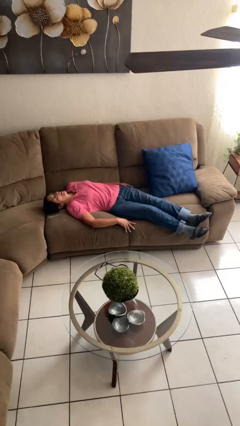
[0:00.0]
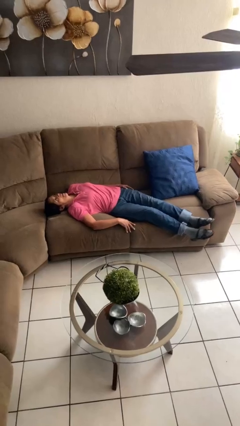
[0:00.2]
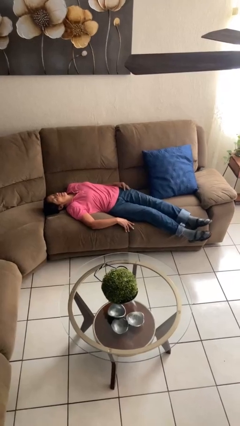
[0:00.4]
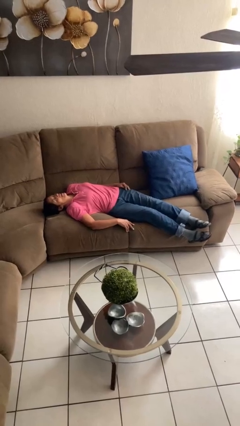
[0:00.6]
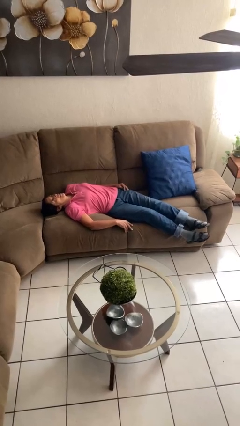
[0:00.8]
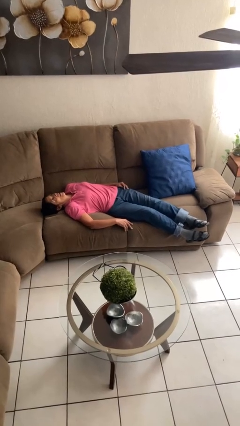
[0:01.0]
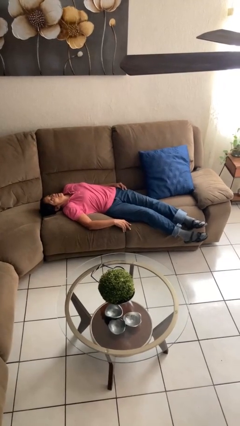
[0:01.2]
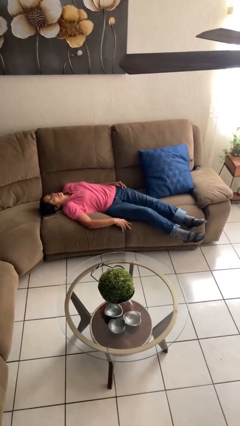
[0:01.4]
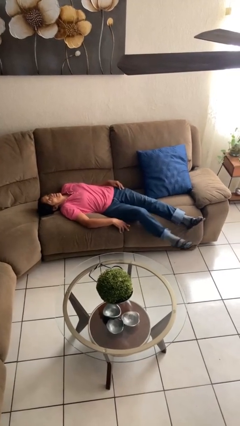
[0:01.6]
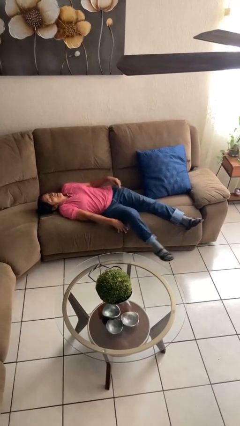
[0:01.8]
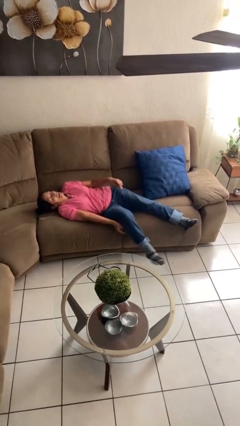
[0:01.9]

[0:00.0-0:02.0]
person lies down on couch

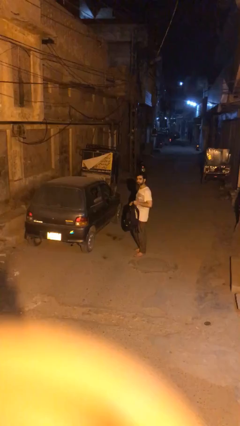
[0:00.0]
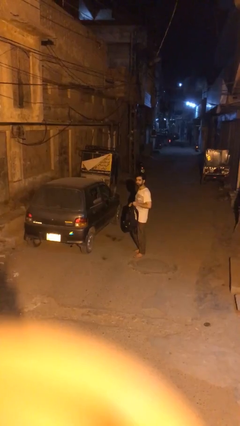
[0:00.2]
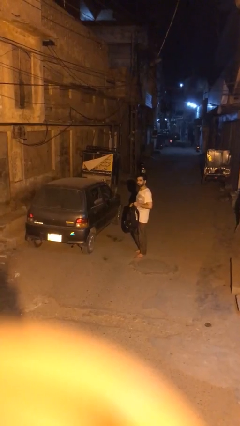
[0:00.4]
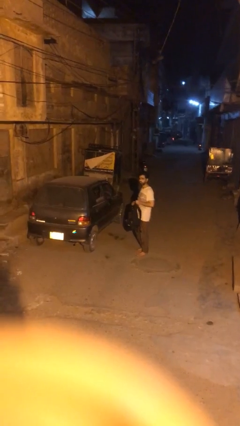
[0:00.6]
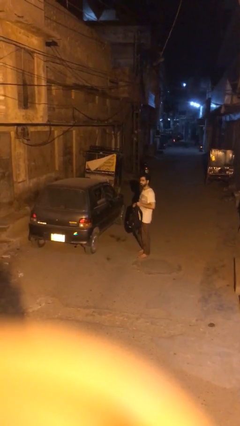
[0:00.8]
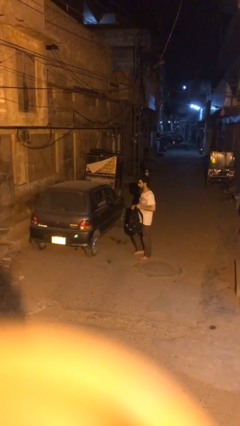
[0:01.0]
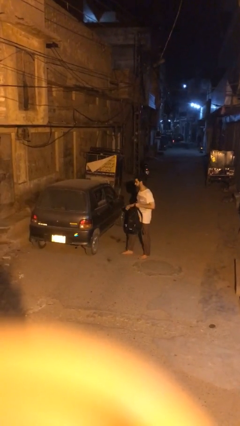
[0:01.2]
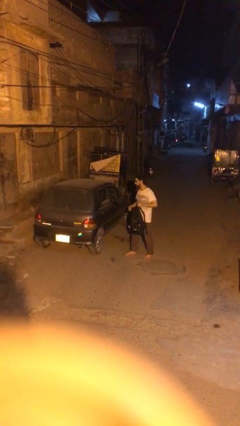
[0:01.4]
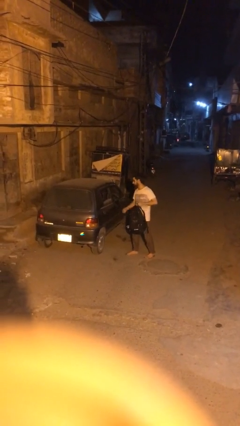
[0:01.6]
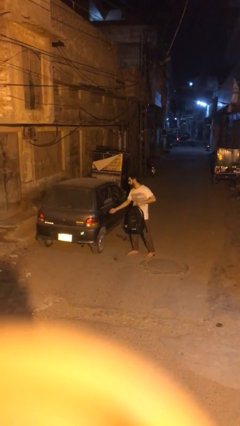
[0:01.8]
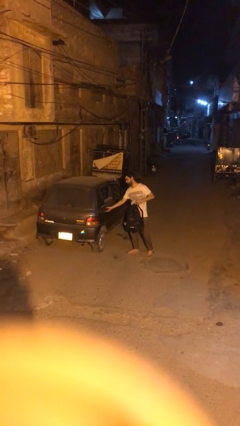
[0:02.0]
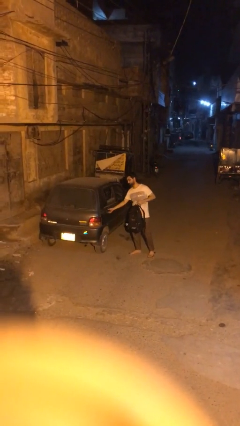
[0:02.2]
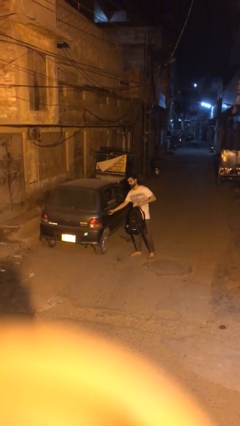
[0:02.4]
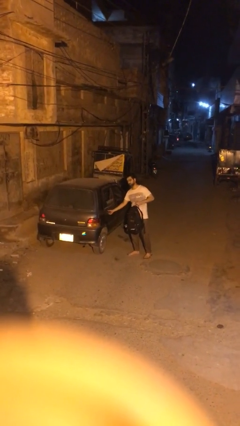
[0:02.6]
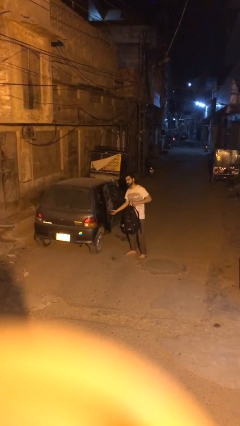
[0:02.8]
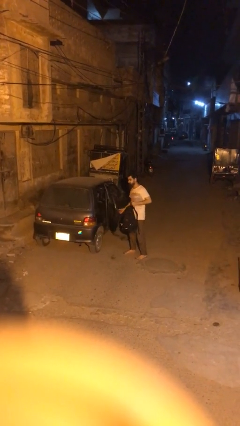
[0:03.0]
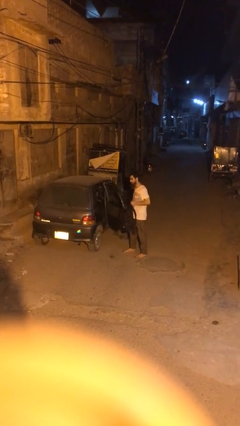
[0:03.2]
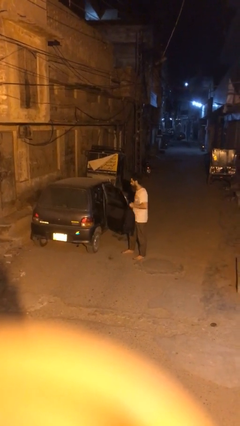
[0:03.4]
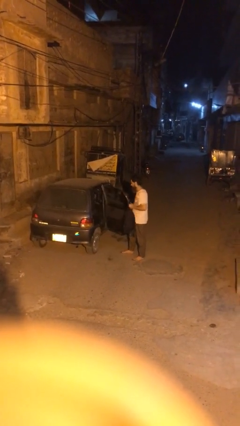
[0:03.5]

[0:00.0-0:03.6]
person opens car door

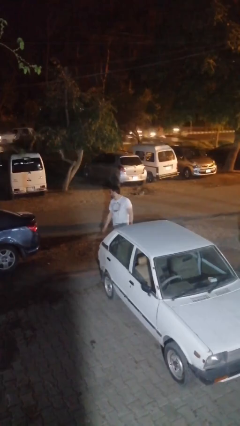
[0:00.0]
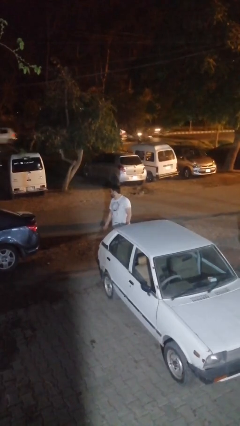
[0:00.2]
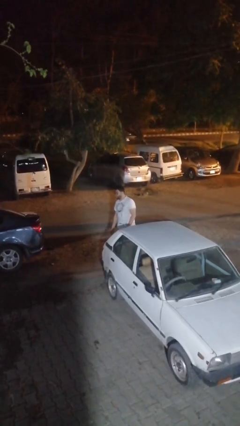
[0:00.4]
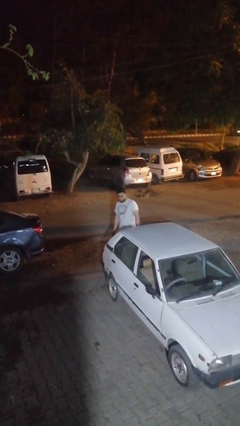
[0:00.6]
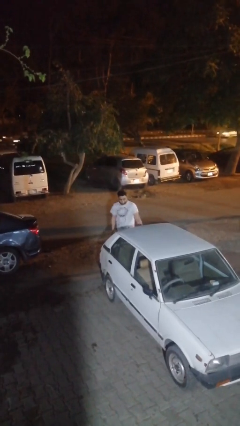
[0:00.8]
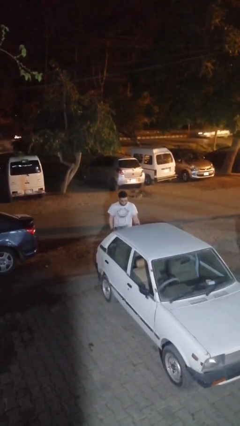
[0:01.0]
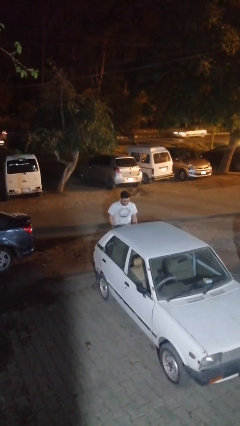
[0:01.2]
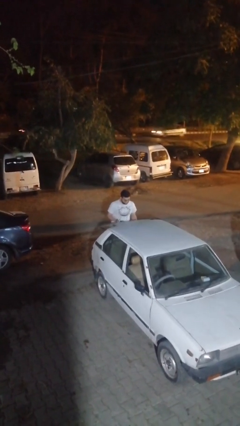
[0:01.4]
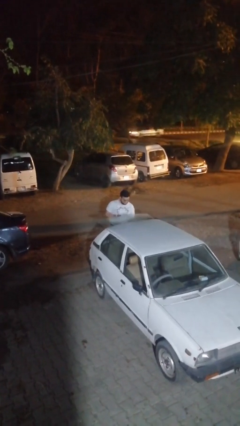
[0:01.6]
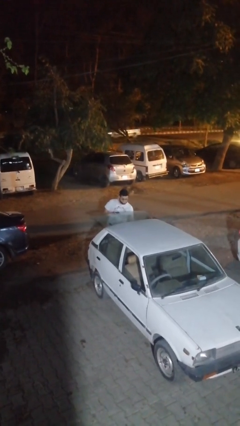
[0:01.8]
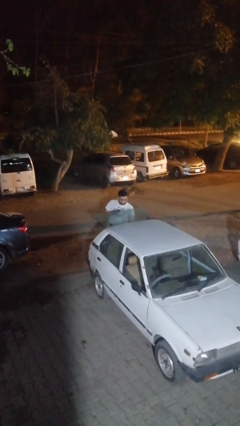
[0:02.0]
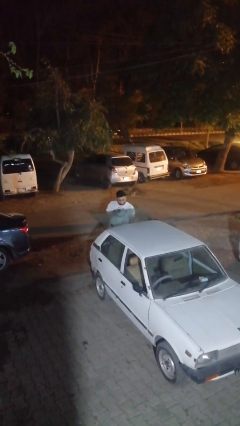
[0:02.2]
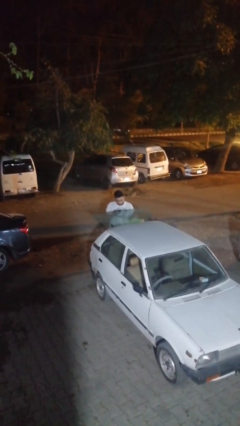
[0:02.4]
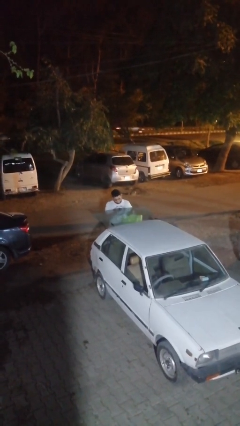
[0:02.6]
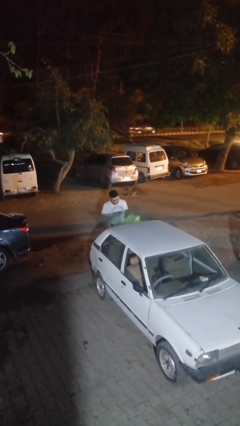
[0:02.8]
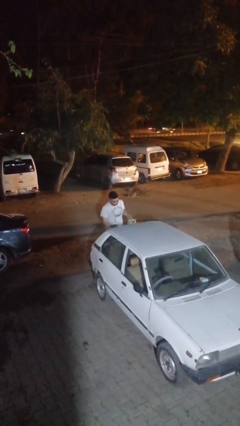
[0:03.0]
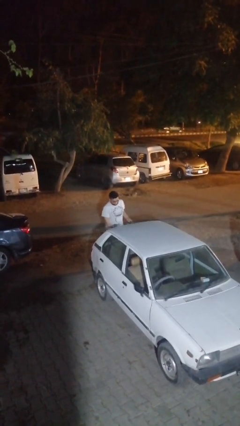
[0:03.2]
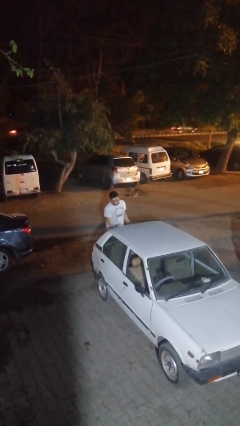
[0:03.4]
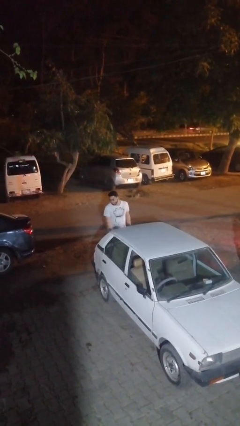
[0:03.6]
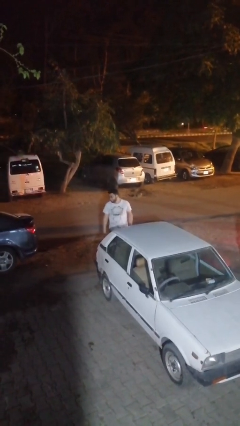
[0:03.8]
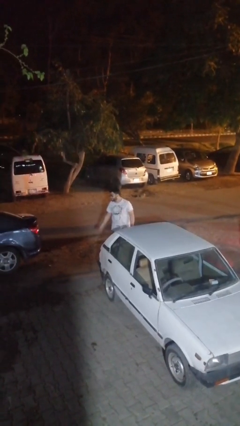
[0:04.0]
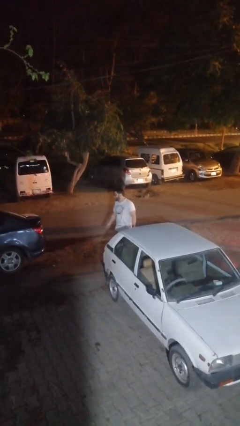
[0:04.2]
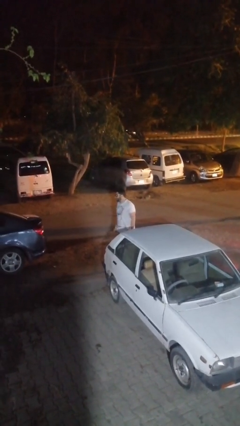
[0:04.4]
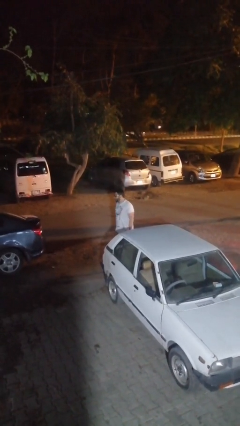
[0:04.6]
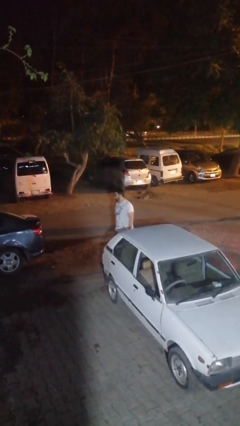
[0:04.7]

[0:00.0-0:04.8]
person unloads car

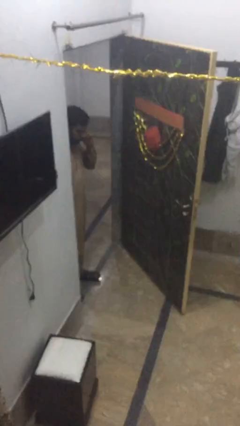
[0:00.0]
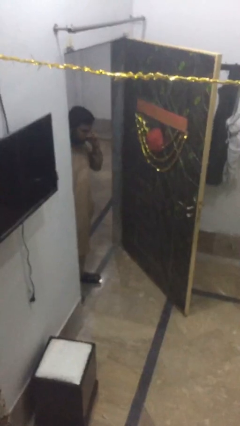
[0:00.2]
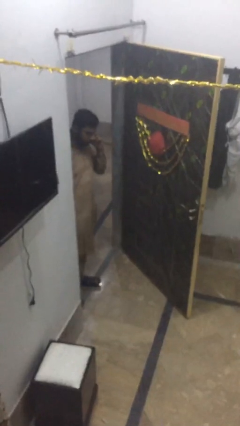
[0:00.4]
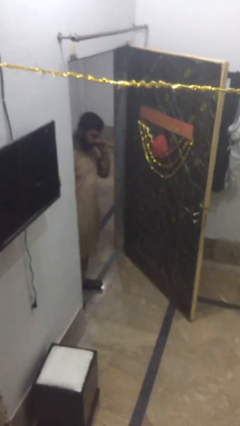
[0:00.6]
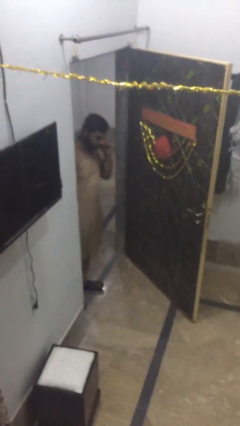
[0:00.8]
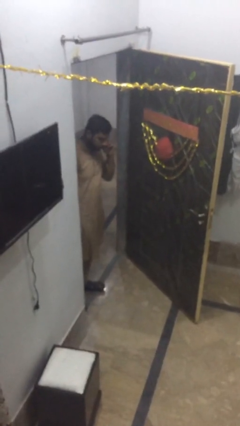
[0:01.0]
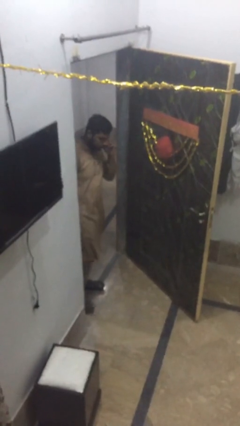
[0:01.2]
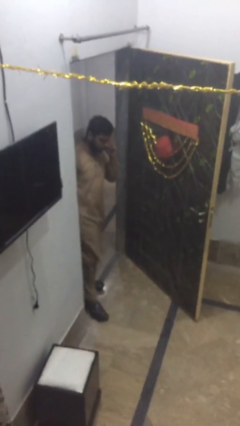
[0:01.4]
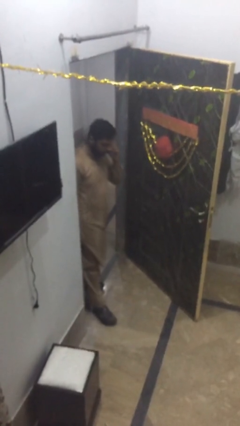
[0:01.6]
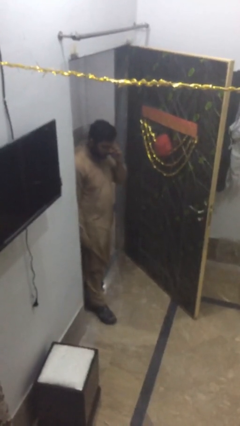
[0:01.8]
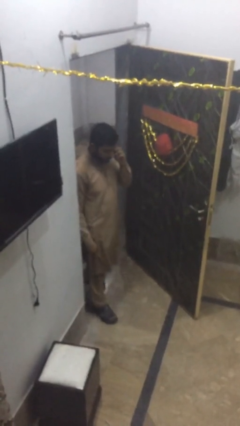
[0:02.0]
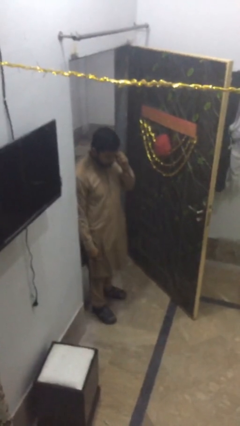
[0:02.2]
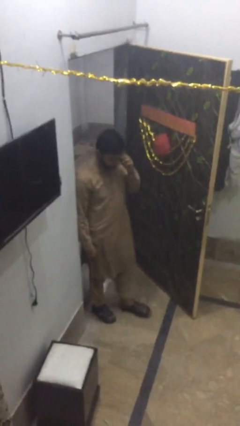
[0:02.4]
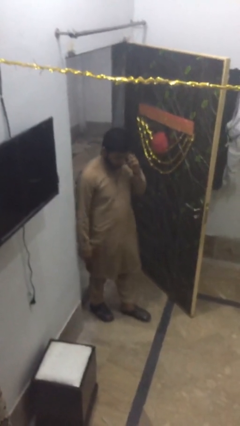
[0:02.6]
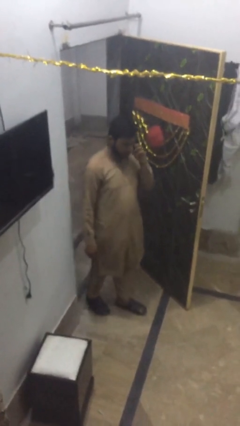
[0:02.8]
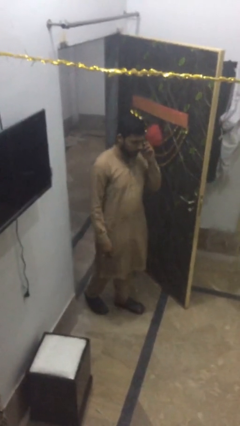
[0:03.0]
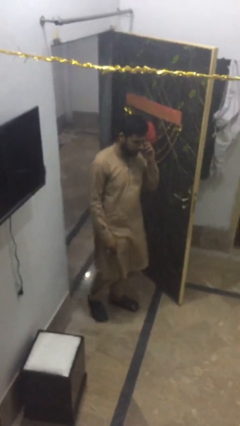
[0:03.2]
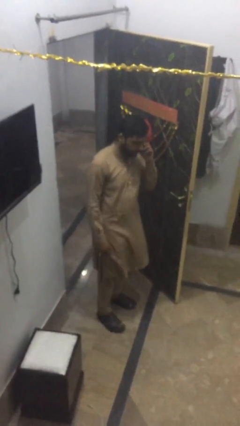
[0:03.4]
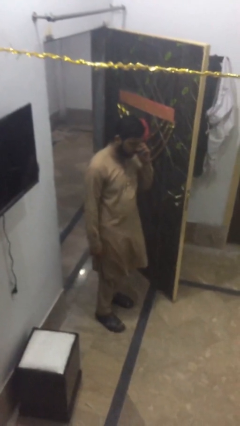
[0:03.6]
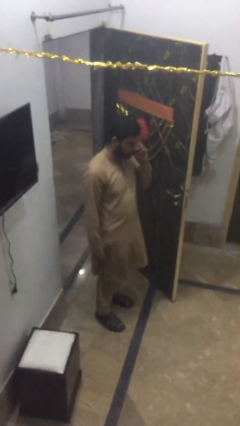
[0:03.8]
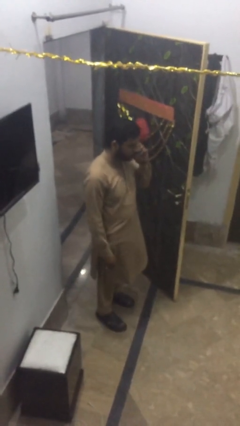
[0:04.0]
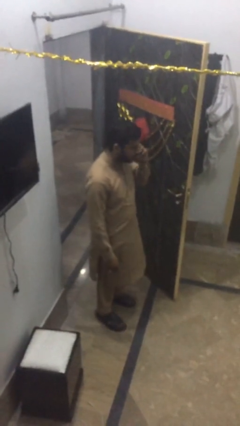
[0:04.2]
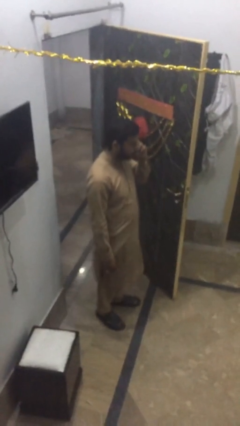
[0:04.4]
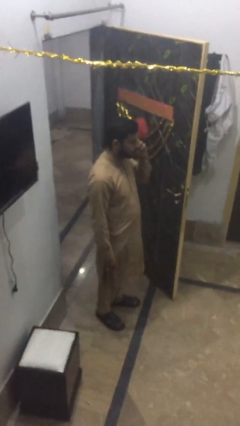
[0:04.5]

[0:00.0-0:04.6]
person enters scene through structure

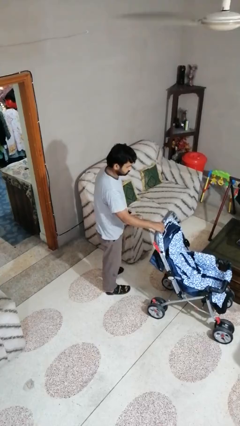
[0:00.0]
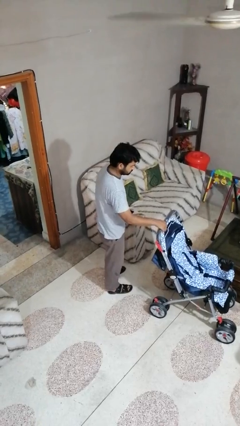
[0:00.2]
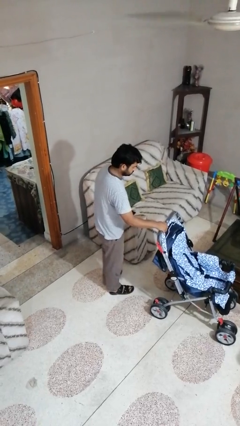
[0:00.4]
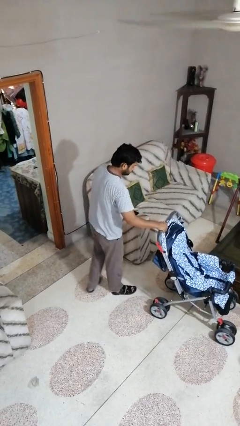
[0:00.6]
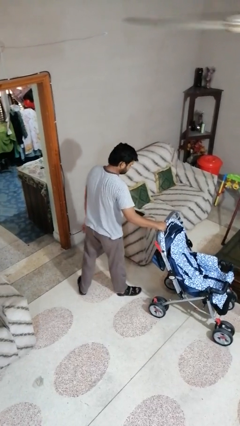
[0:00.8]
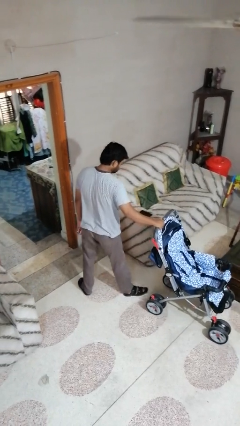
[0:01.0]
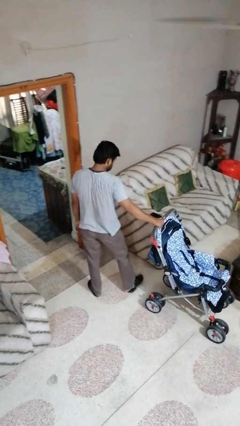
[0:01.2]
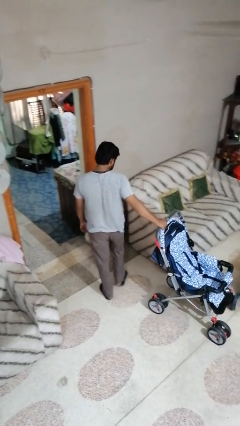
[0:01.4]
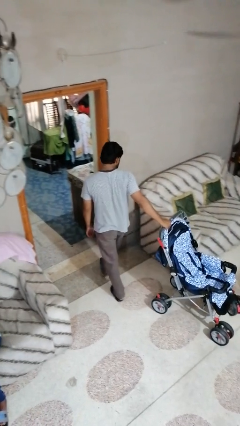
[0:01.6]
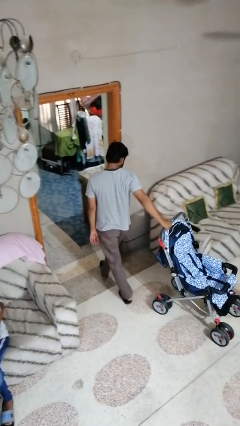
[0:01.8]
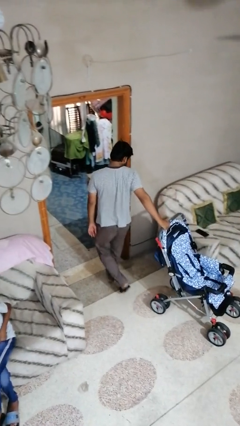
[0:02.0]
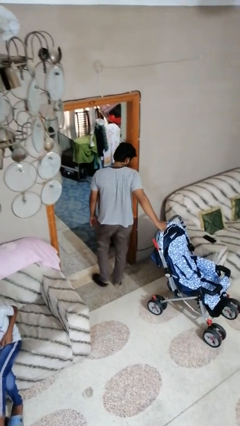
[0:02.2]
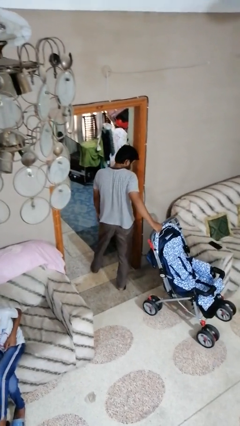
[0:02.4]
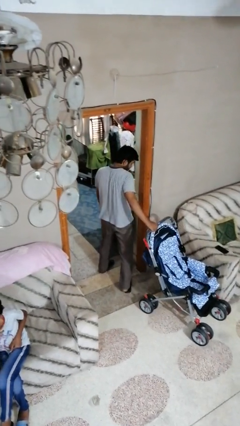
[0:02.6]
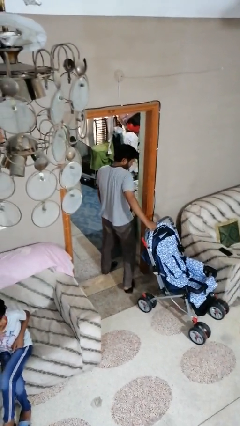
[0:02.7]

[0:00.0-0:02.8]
person pulls wheeled cart
